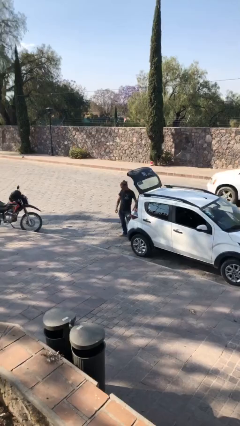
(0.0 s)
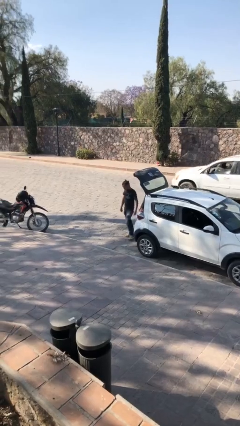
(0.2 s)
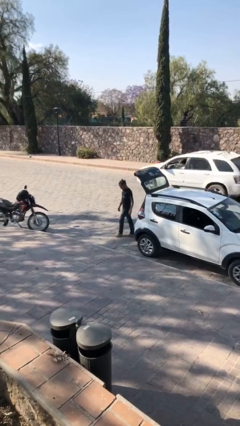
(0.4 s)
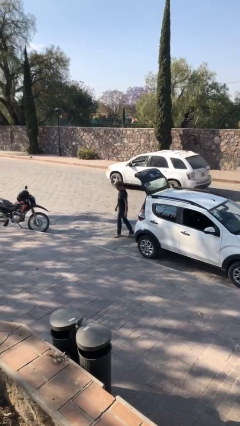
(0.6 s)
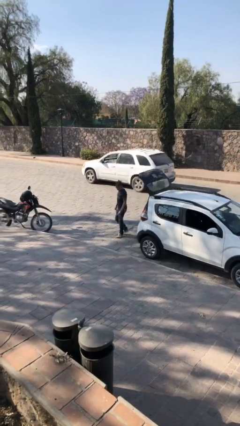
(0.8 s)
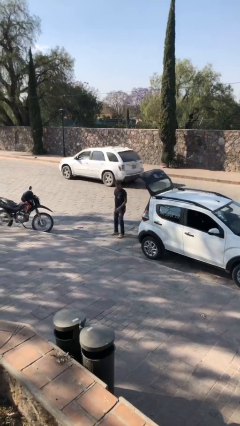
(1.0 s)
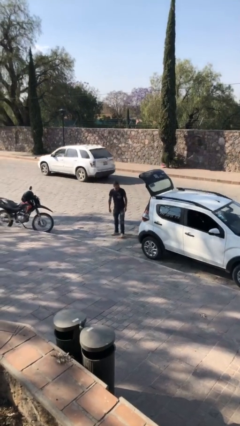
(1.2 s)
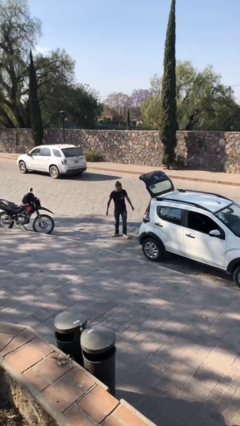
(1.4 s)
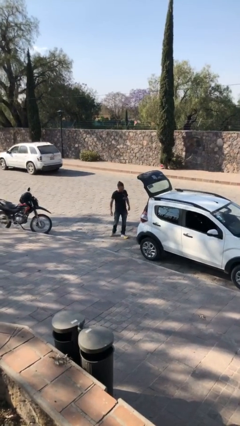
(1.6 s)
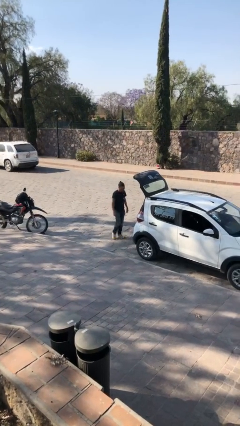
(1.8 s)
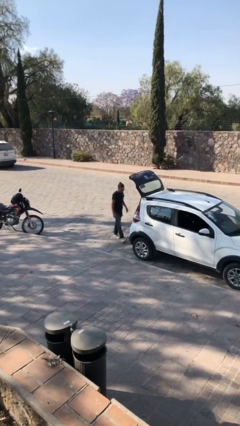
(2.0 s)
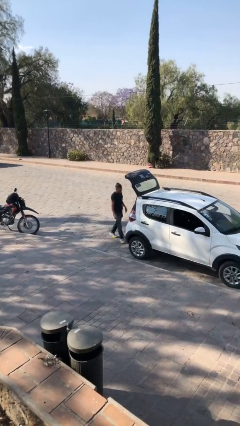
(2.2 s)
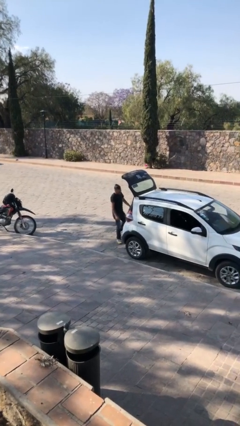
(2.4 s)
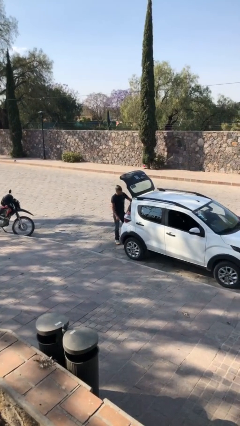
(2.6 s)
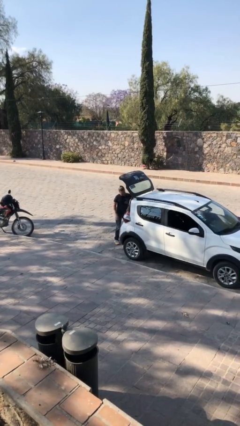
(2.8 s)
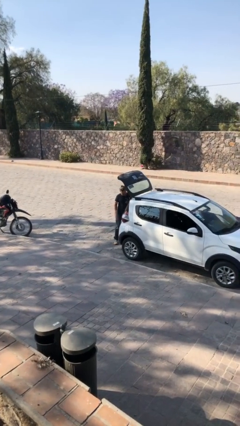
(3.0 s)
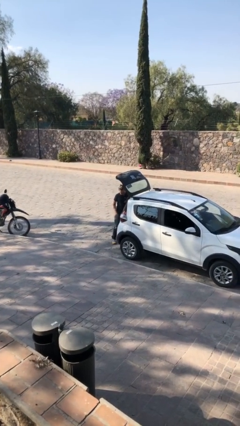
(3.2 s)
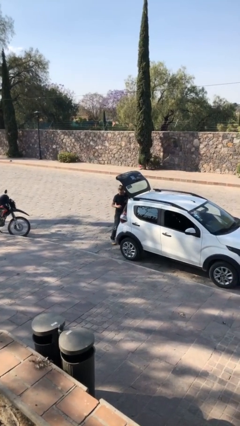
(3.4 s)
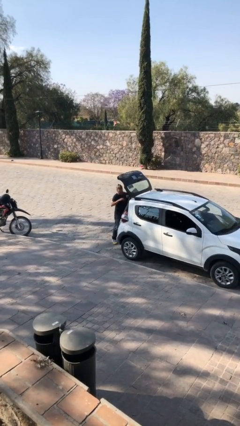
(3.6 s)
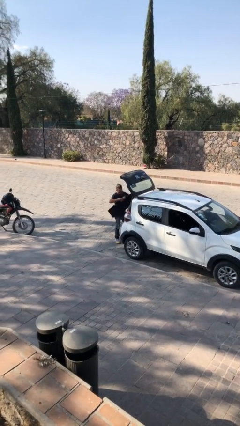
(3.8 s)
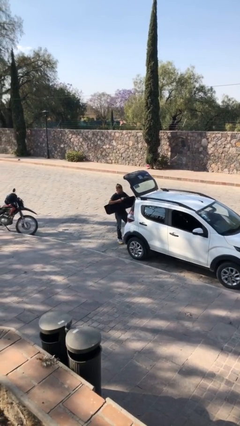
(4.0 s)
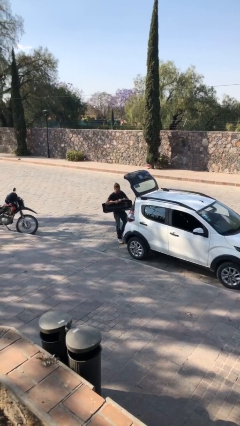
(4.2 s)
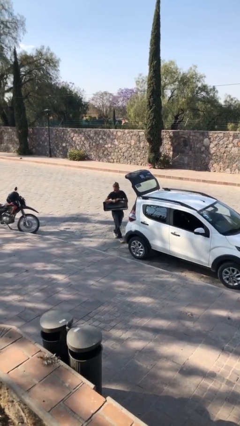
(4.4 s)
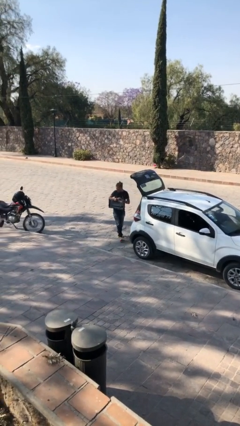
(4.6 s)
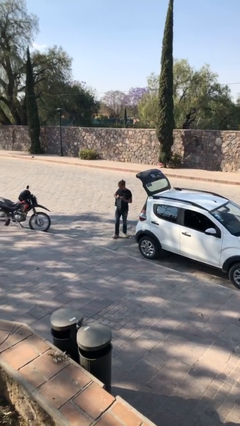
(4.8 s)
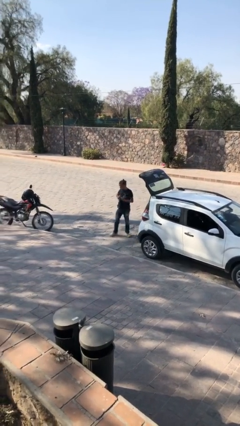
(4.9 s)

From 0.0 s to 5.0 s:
person unloads car

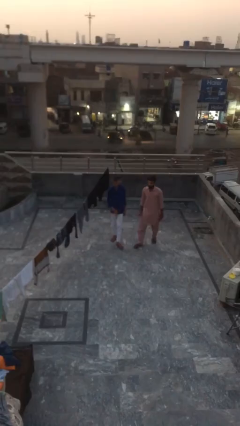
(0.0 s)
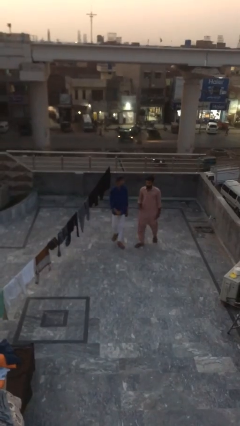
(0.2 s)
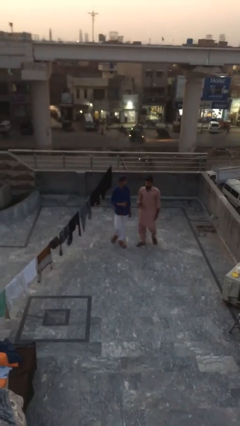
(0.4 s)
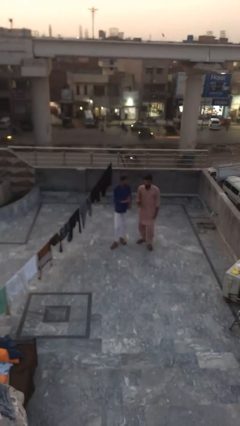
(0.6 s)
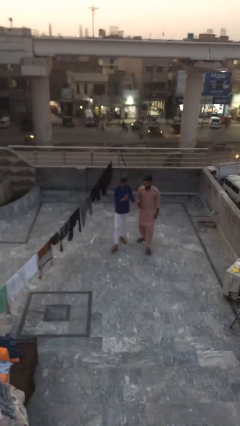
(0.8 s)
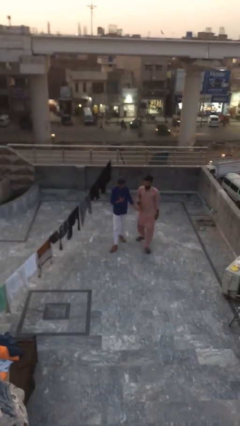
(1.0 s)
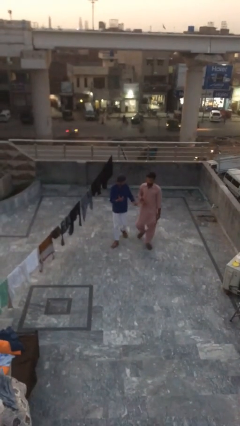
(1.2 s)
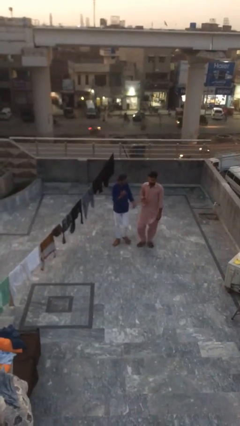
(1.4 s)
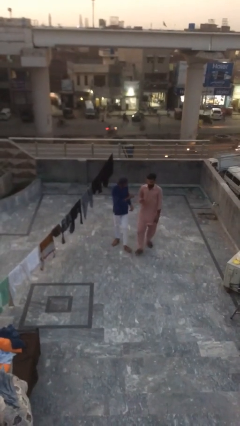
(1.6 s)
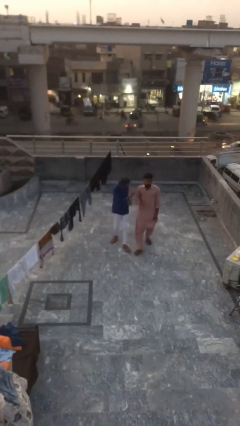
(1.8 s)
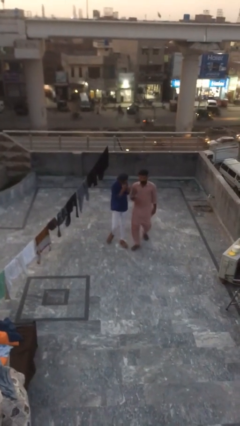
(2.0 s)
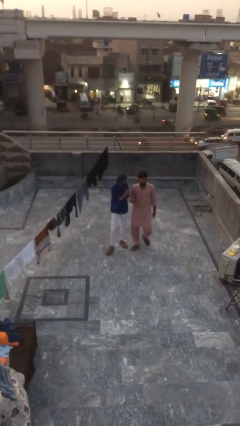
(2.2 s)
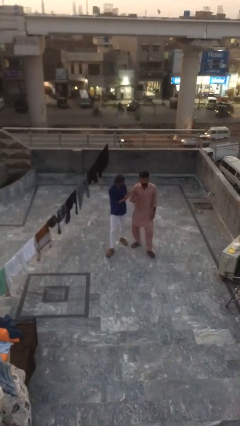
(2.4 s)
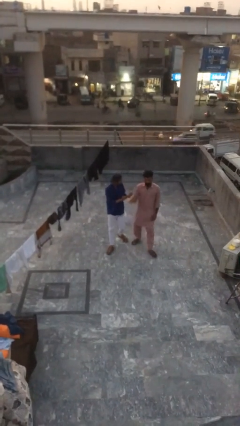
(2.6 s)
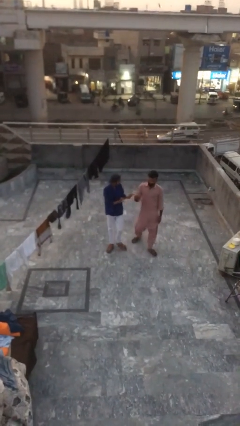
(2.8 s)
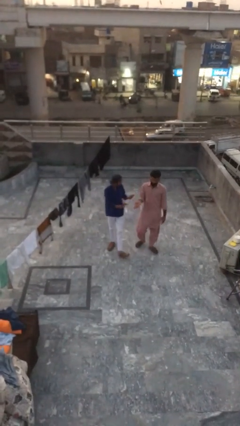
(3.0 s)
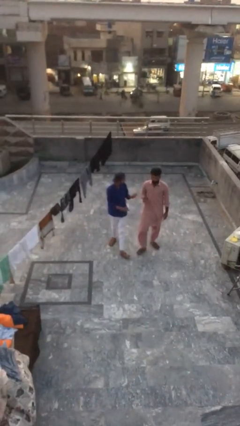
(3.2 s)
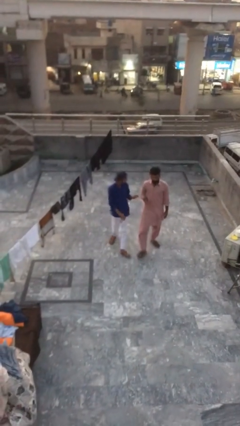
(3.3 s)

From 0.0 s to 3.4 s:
person talks to person

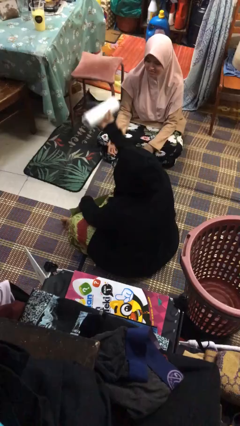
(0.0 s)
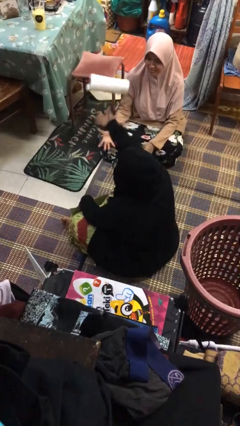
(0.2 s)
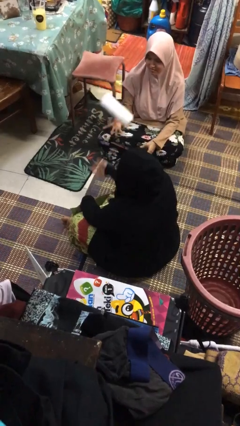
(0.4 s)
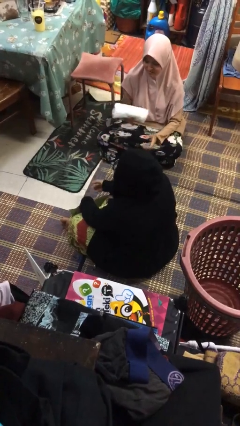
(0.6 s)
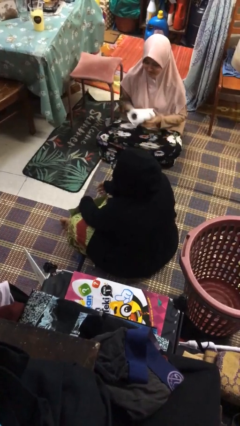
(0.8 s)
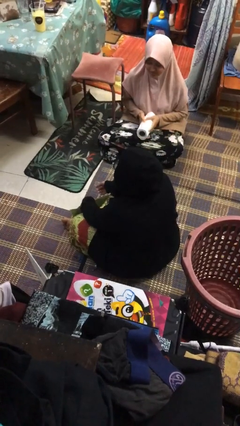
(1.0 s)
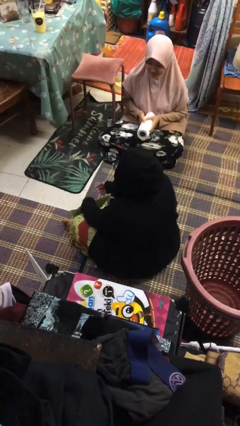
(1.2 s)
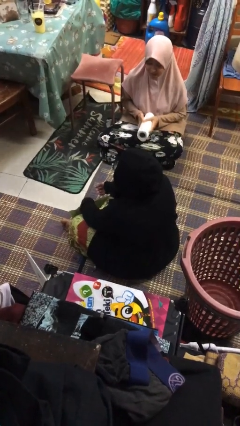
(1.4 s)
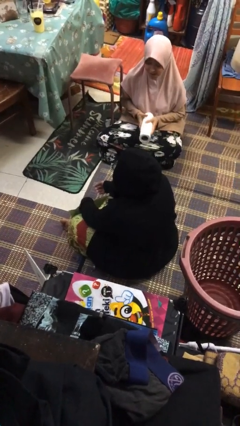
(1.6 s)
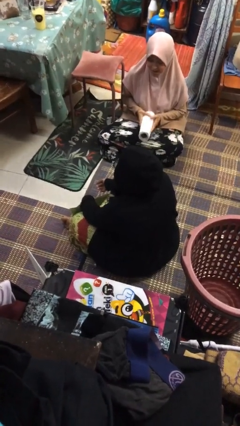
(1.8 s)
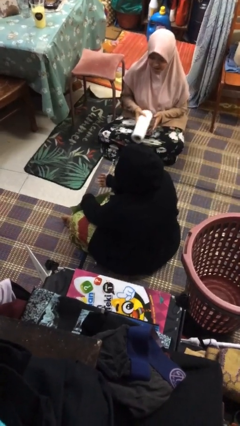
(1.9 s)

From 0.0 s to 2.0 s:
person throws object to person

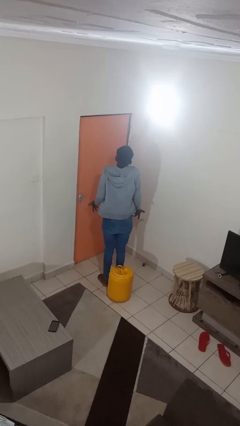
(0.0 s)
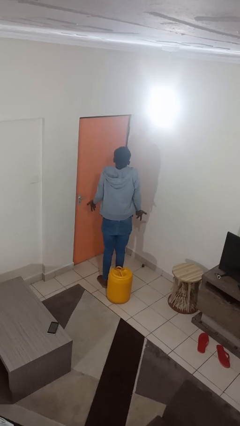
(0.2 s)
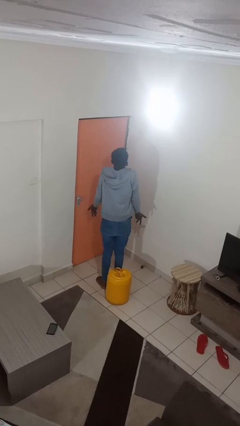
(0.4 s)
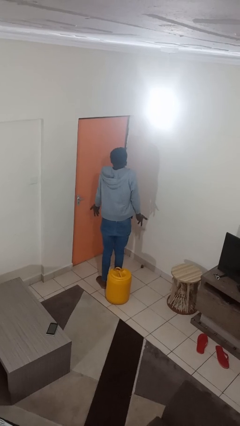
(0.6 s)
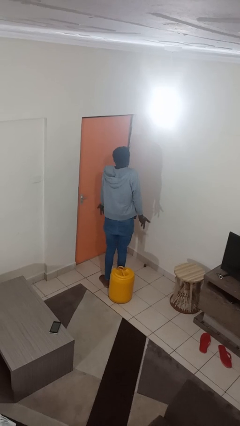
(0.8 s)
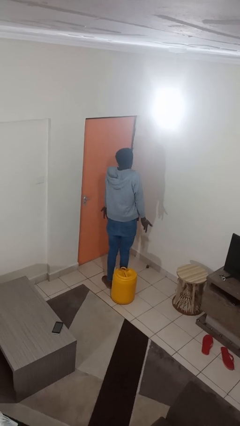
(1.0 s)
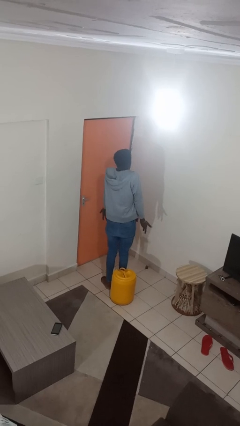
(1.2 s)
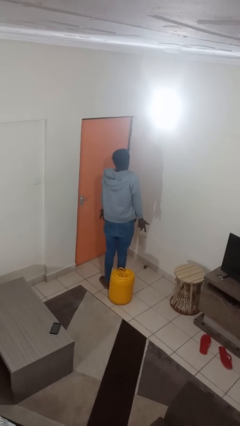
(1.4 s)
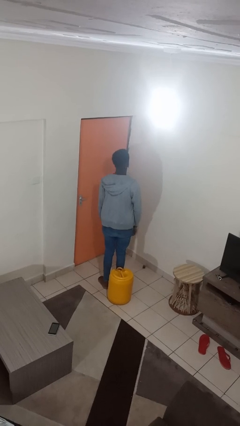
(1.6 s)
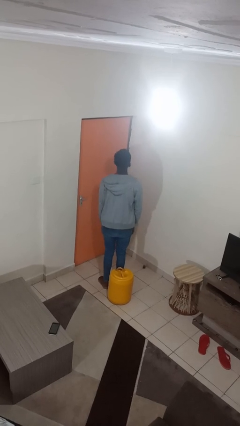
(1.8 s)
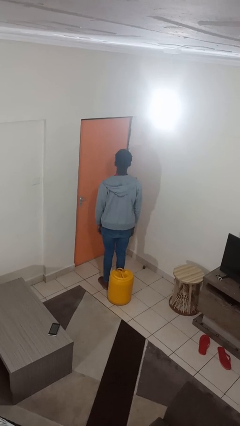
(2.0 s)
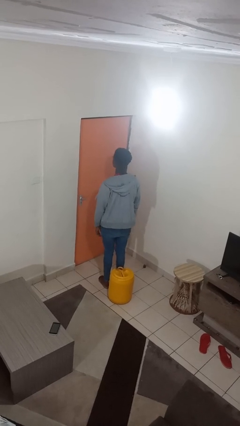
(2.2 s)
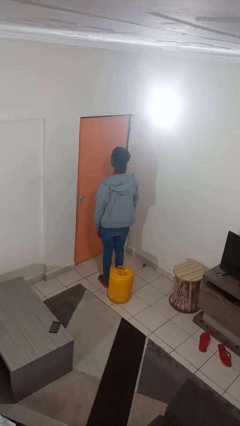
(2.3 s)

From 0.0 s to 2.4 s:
person shrugs

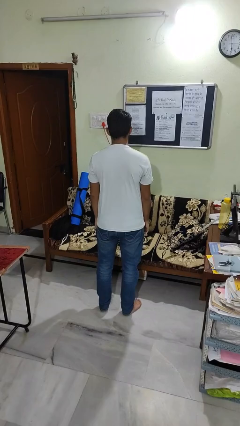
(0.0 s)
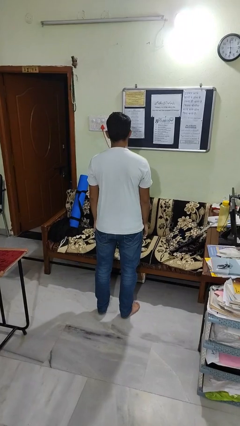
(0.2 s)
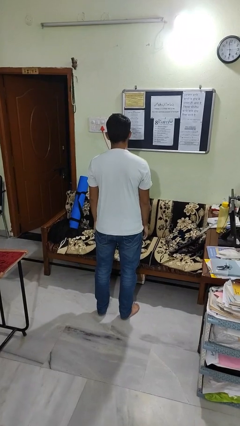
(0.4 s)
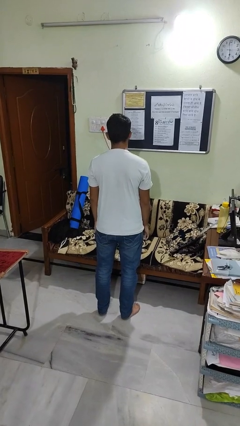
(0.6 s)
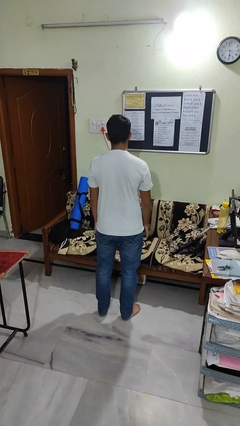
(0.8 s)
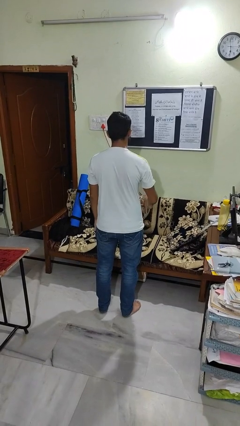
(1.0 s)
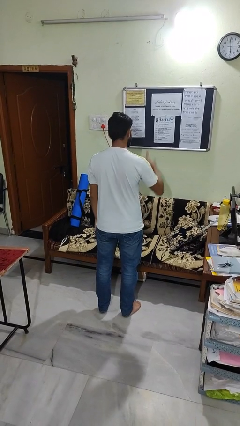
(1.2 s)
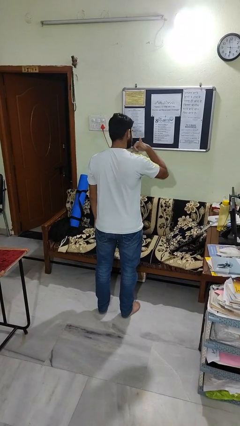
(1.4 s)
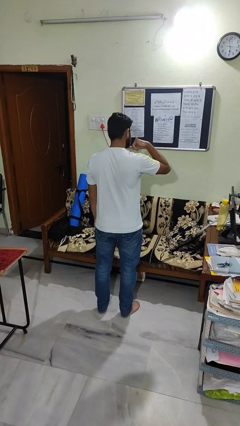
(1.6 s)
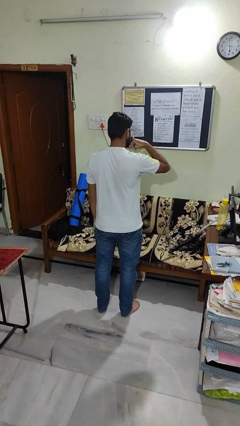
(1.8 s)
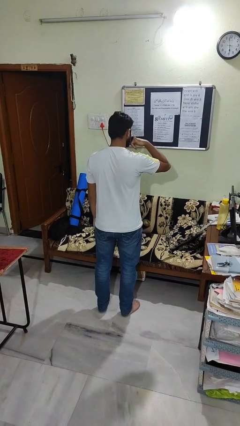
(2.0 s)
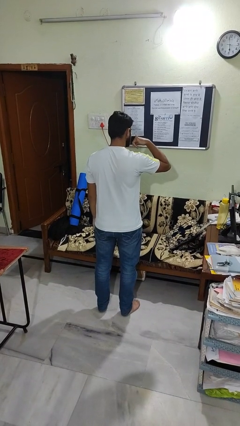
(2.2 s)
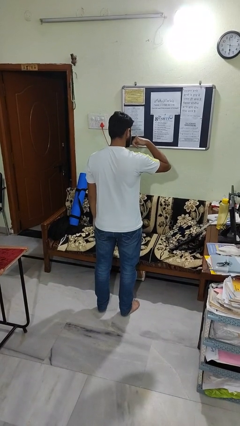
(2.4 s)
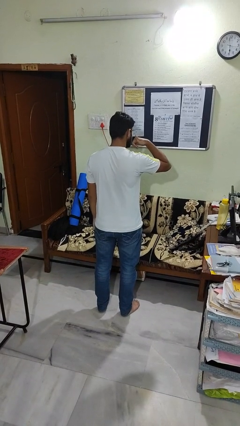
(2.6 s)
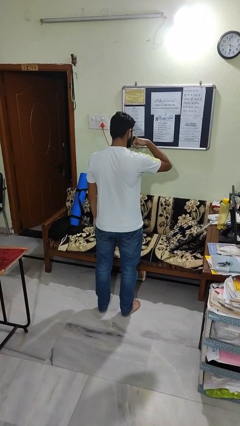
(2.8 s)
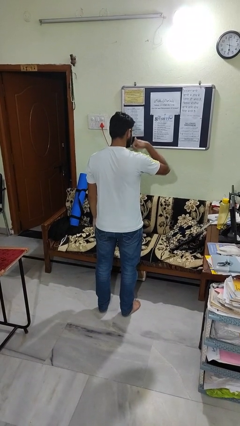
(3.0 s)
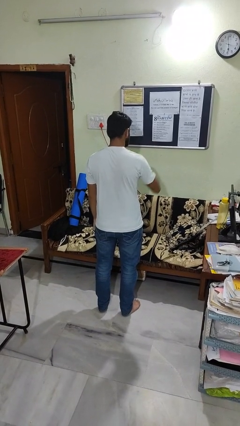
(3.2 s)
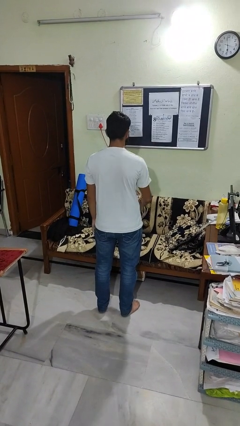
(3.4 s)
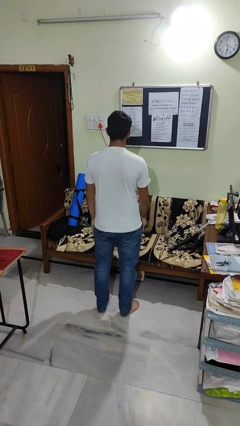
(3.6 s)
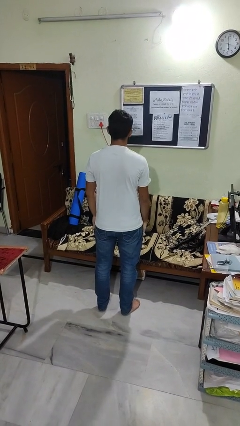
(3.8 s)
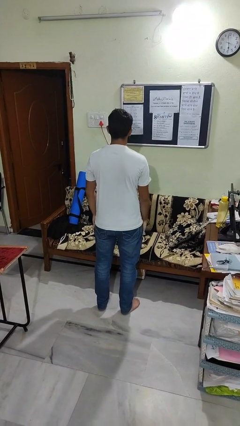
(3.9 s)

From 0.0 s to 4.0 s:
person gestures call me

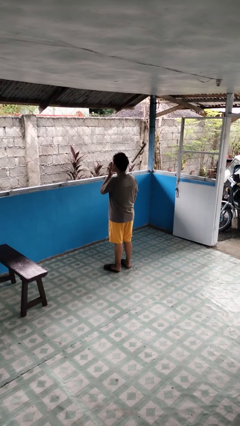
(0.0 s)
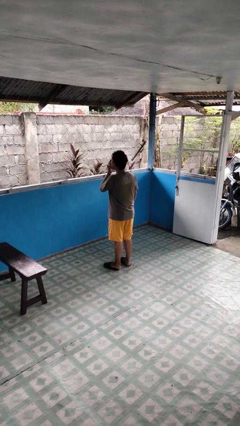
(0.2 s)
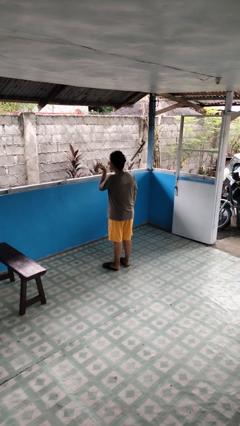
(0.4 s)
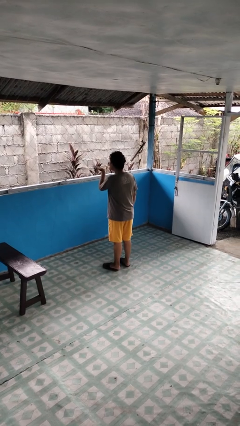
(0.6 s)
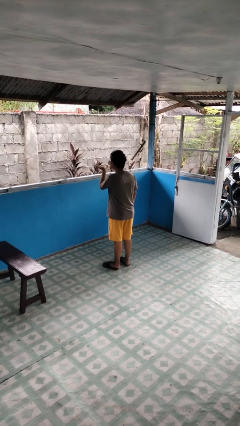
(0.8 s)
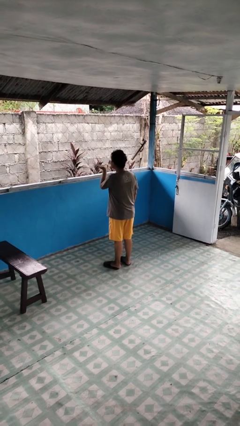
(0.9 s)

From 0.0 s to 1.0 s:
person gestures blow kiss
